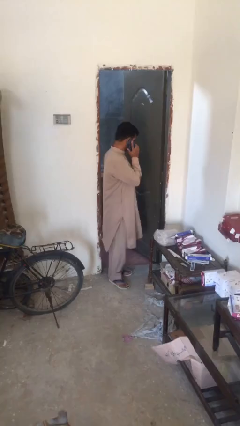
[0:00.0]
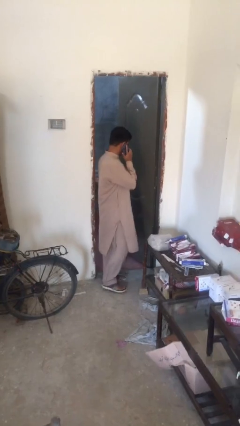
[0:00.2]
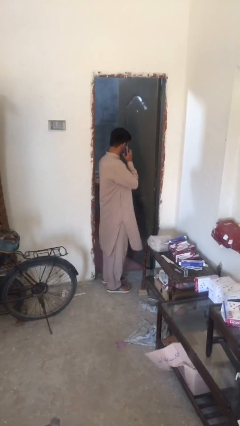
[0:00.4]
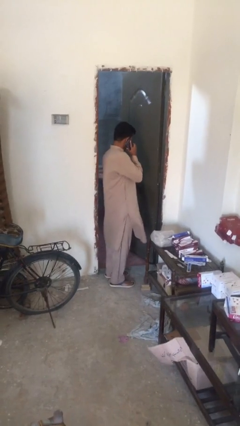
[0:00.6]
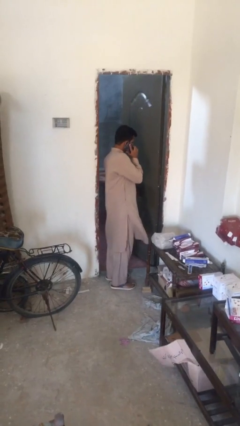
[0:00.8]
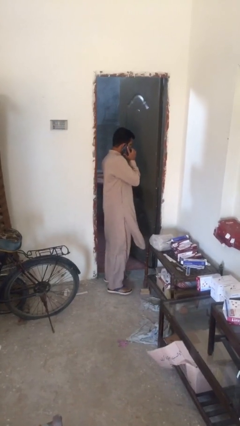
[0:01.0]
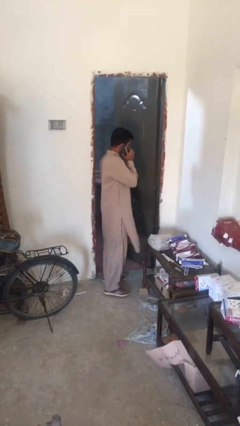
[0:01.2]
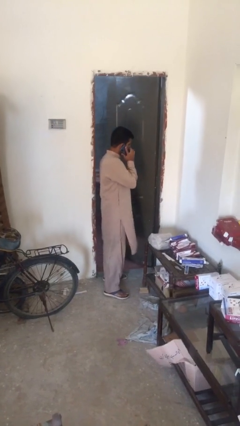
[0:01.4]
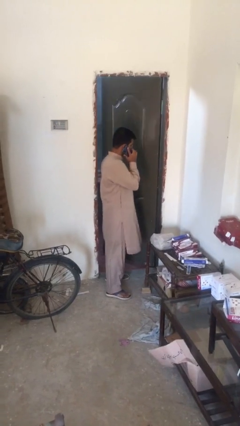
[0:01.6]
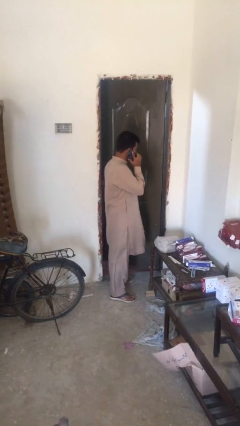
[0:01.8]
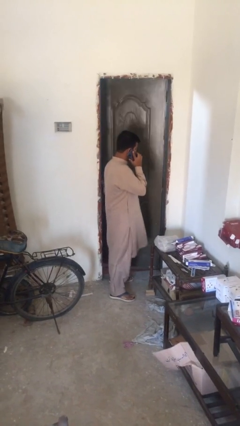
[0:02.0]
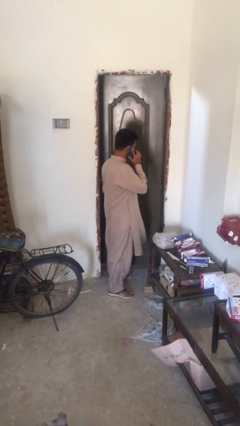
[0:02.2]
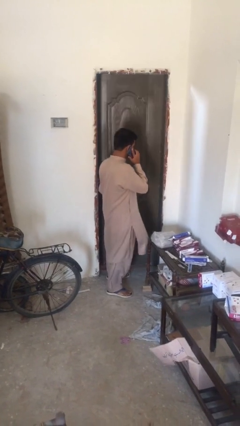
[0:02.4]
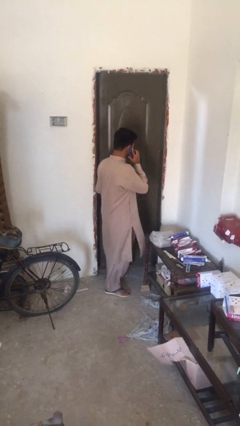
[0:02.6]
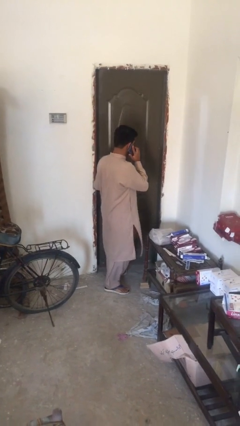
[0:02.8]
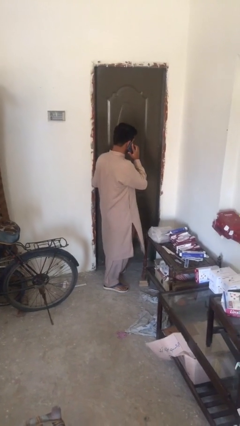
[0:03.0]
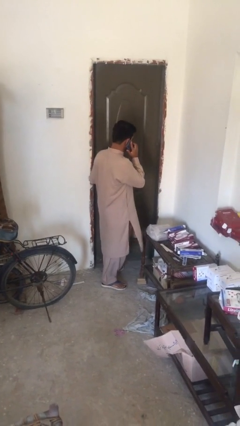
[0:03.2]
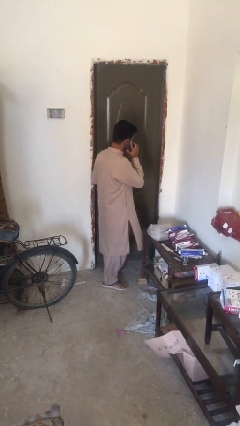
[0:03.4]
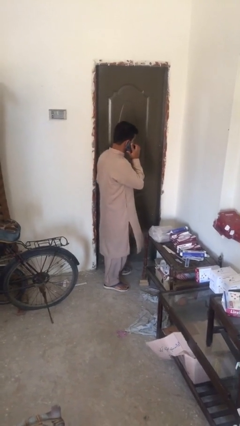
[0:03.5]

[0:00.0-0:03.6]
person closes facility door

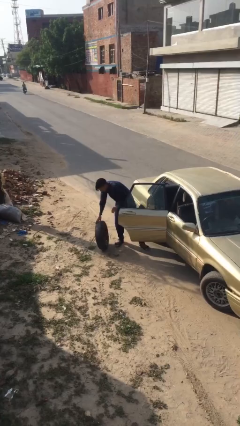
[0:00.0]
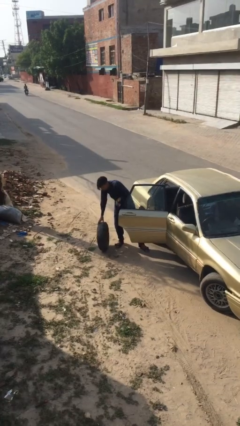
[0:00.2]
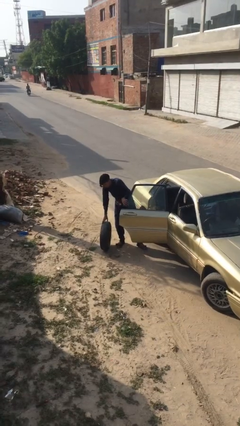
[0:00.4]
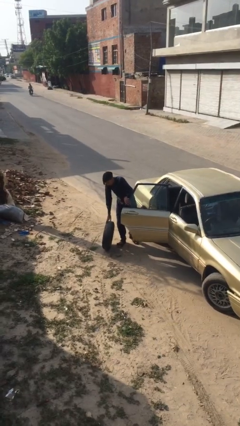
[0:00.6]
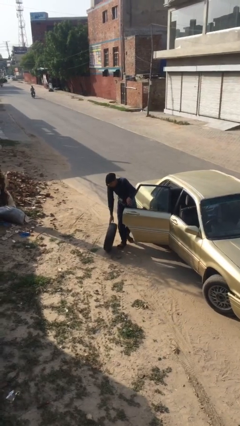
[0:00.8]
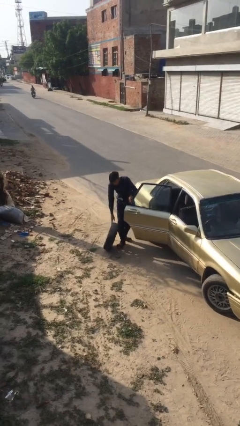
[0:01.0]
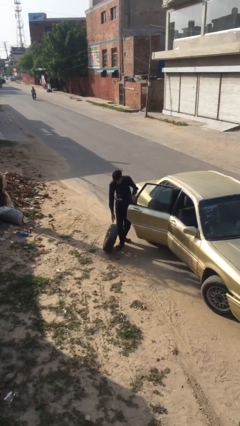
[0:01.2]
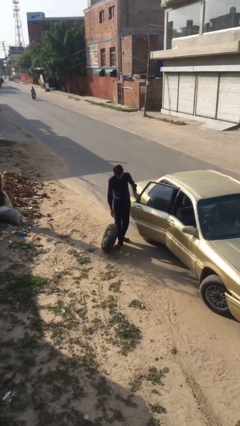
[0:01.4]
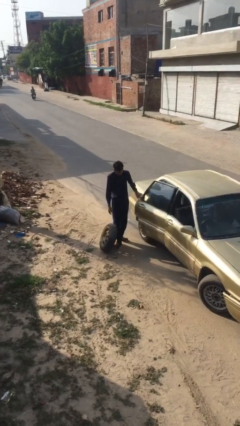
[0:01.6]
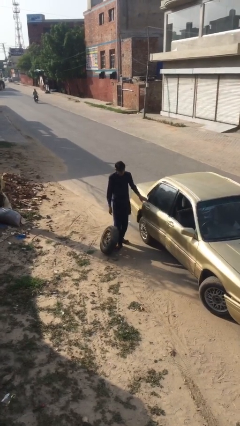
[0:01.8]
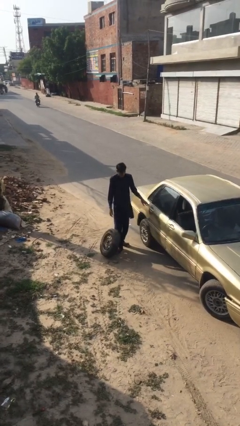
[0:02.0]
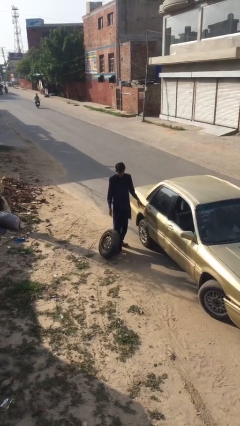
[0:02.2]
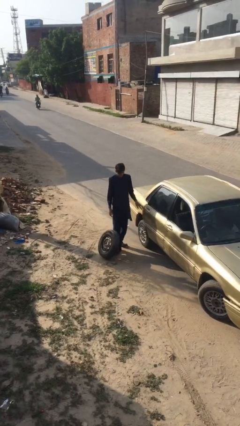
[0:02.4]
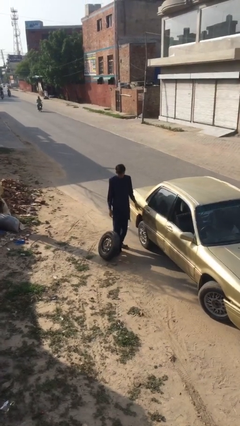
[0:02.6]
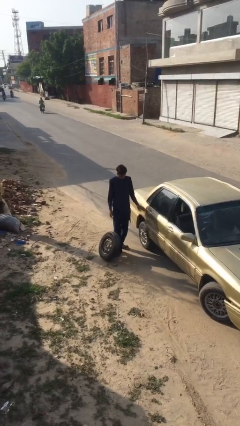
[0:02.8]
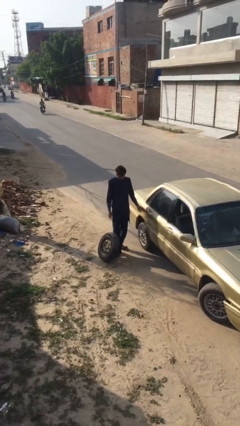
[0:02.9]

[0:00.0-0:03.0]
person closes car door

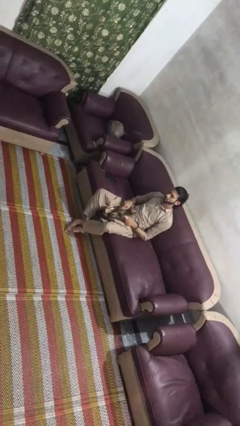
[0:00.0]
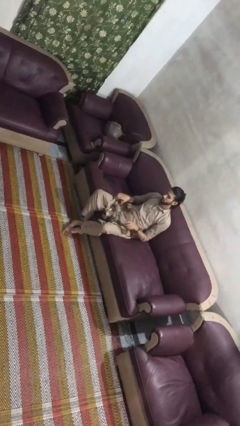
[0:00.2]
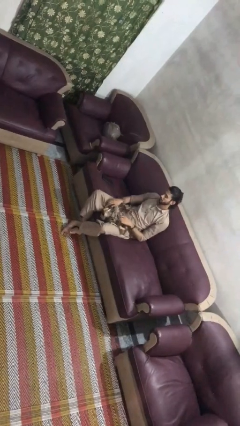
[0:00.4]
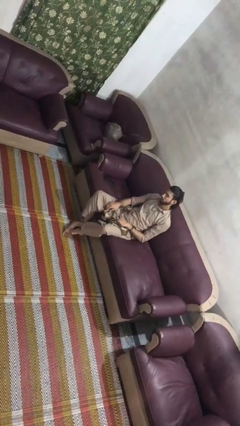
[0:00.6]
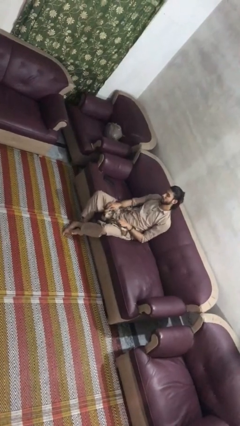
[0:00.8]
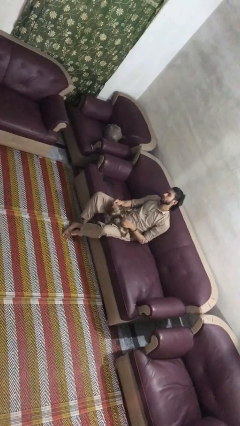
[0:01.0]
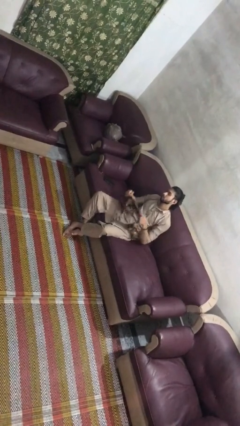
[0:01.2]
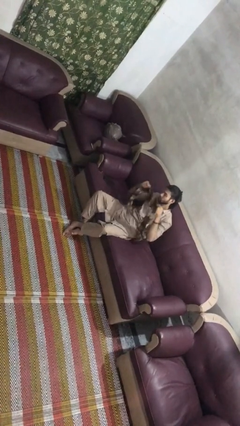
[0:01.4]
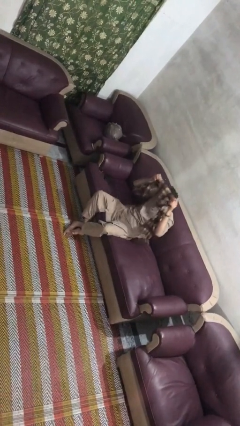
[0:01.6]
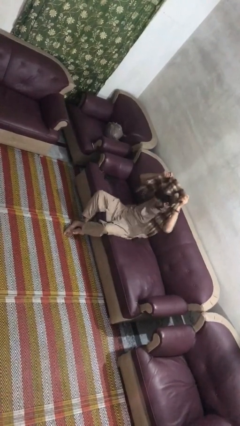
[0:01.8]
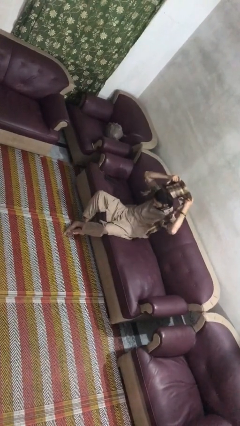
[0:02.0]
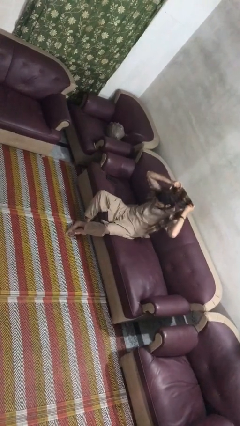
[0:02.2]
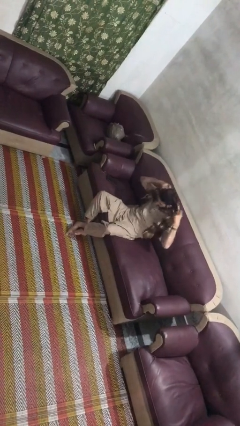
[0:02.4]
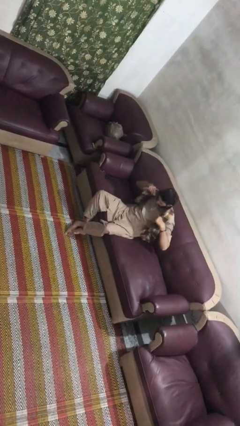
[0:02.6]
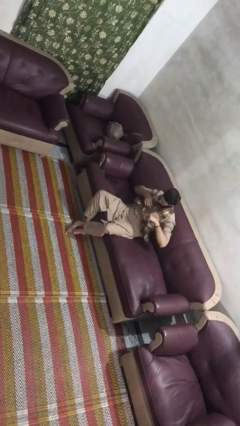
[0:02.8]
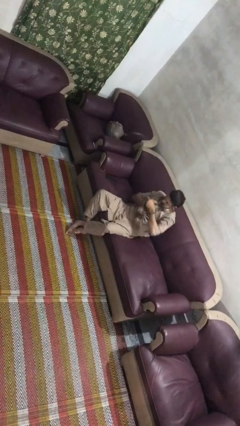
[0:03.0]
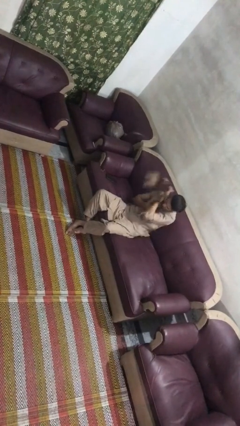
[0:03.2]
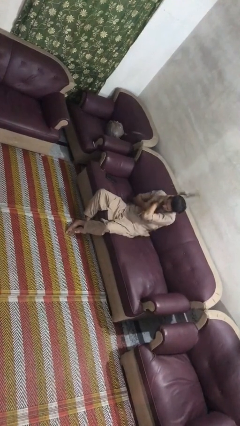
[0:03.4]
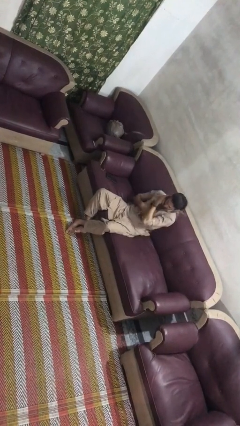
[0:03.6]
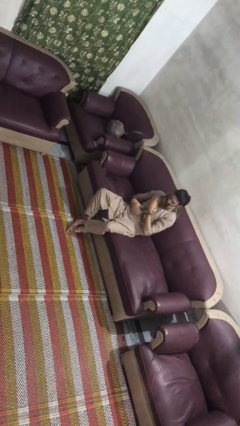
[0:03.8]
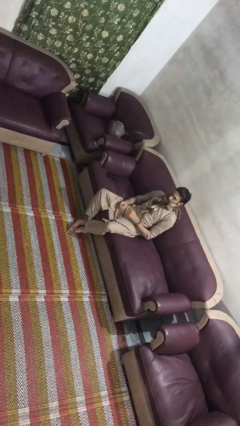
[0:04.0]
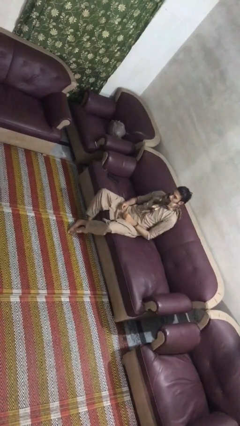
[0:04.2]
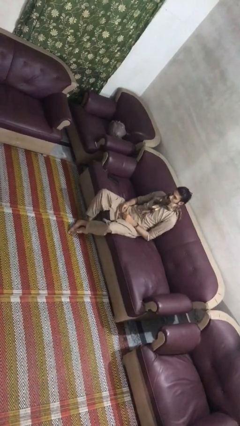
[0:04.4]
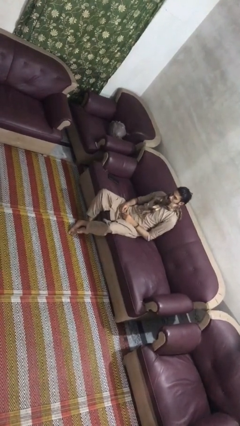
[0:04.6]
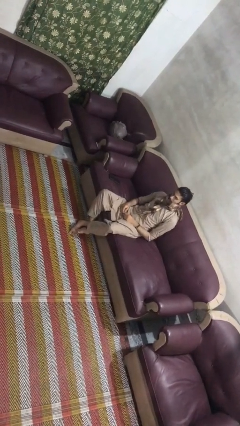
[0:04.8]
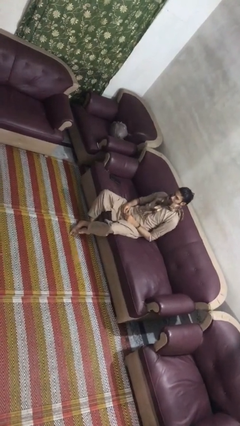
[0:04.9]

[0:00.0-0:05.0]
person puts on scarf

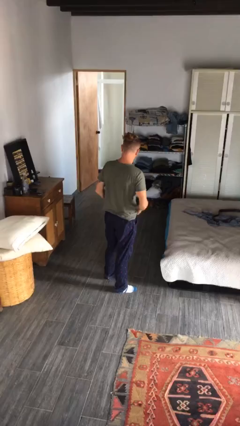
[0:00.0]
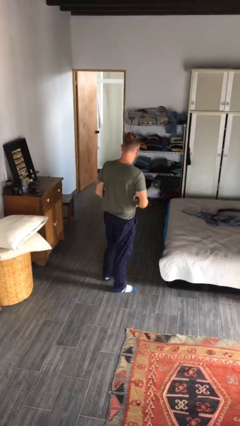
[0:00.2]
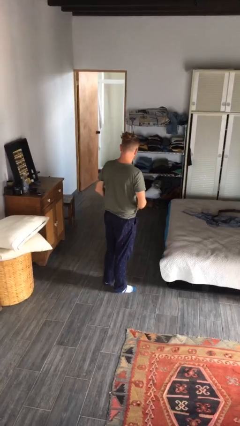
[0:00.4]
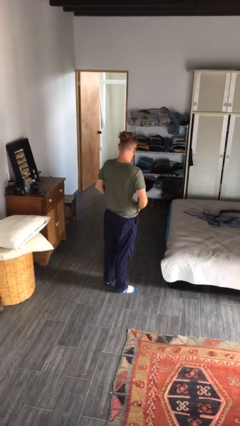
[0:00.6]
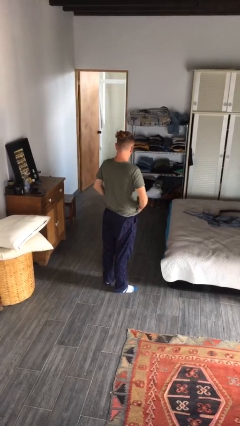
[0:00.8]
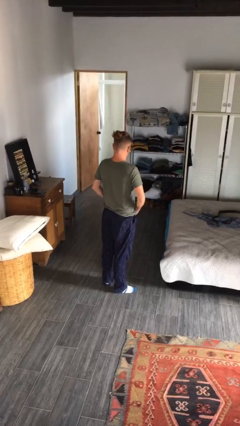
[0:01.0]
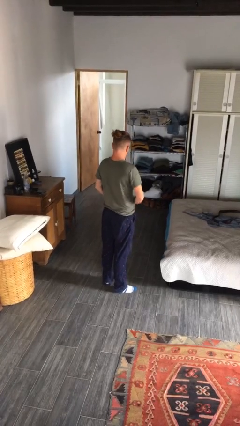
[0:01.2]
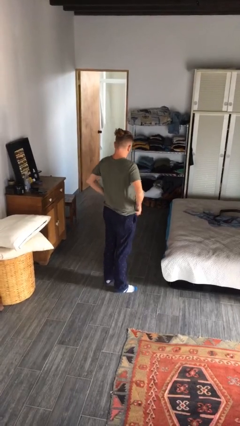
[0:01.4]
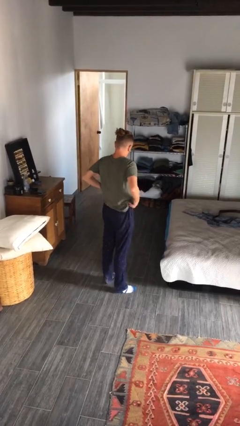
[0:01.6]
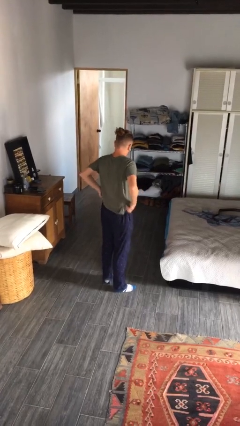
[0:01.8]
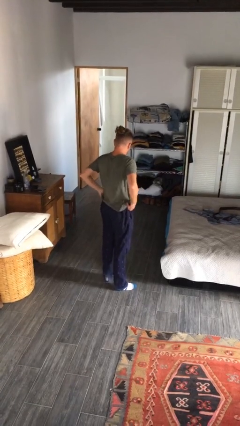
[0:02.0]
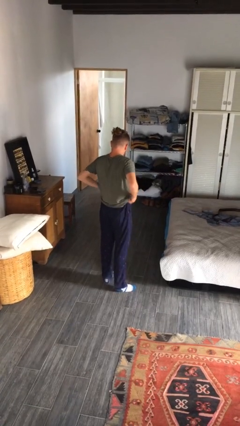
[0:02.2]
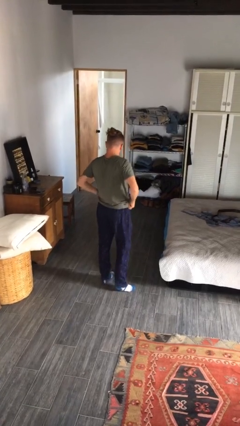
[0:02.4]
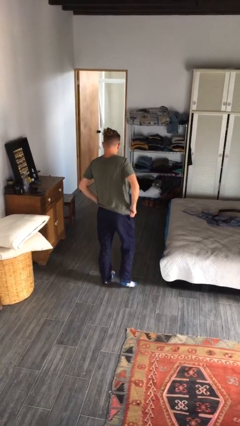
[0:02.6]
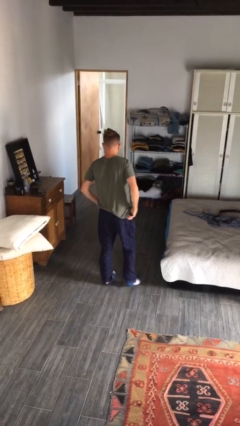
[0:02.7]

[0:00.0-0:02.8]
person hikes up pants

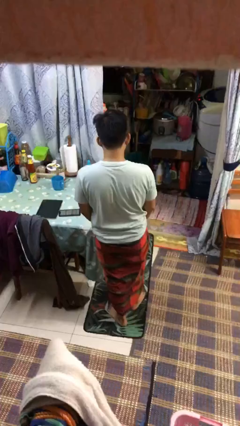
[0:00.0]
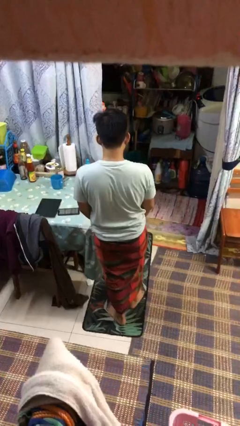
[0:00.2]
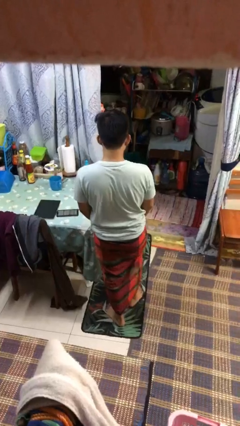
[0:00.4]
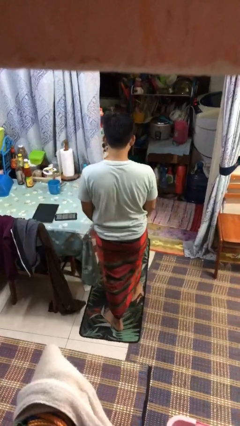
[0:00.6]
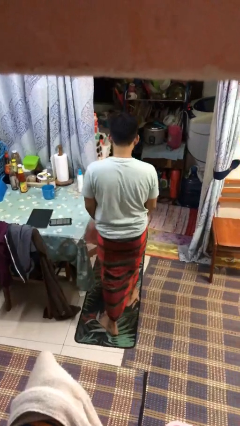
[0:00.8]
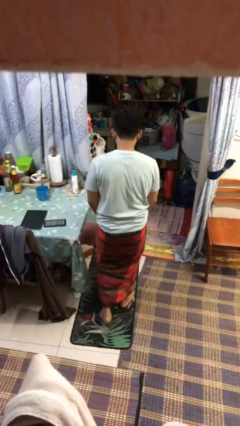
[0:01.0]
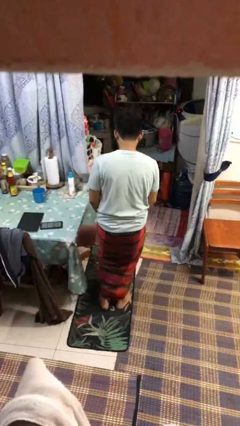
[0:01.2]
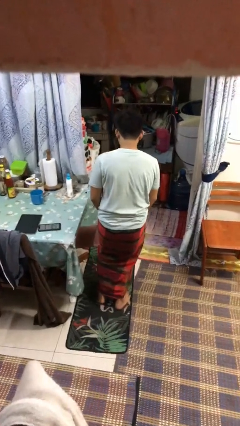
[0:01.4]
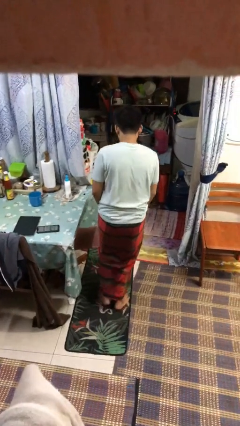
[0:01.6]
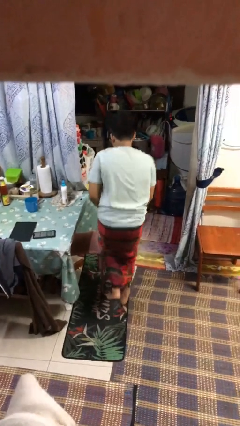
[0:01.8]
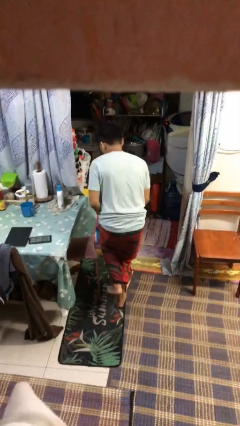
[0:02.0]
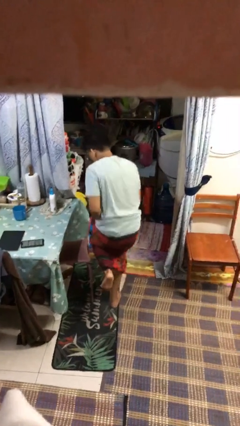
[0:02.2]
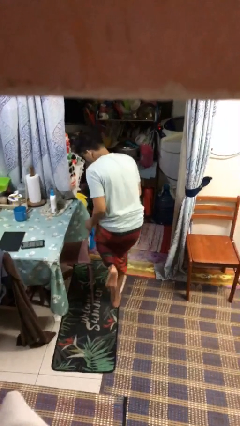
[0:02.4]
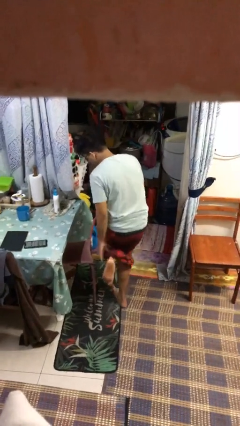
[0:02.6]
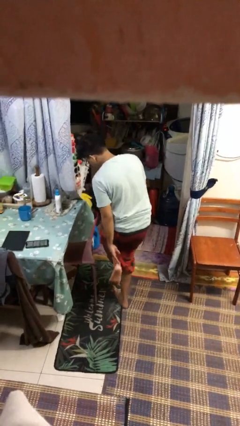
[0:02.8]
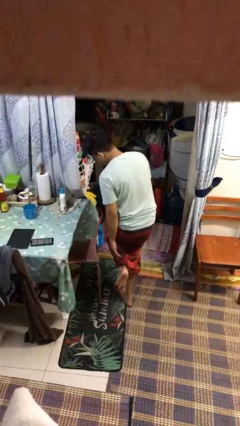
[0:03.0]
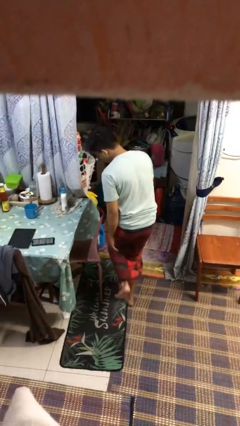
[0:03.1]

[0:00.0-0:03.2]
person stubs toe
